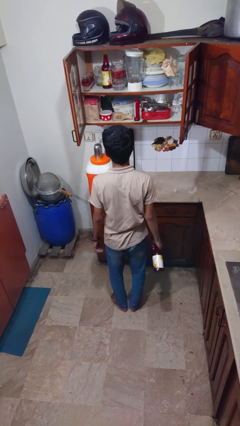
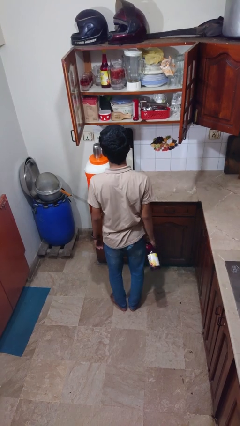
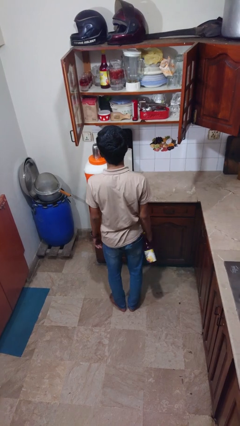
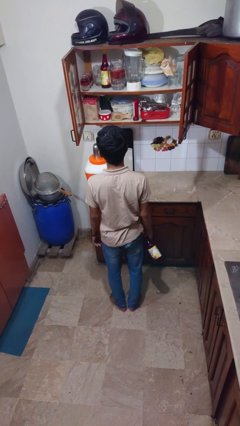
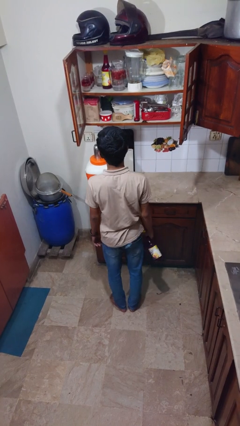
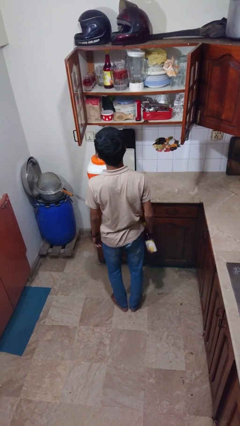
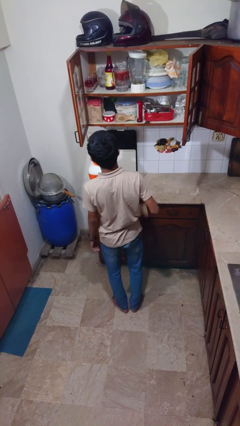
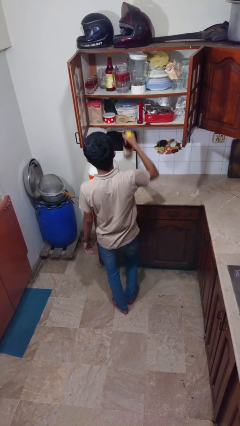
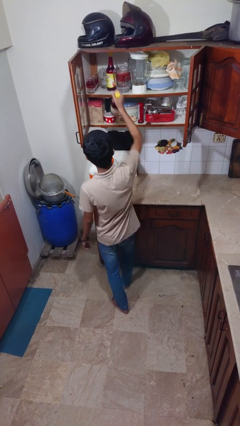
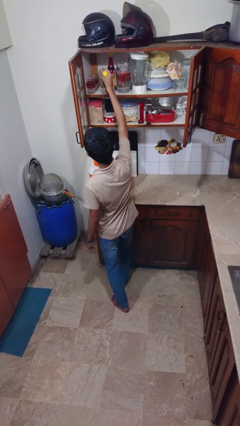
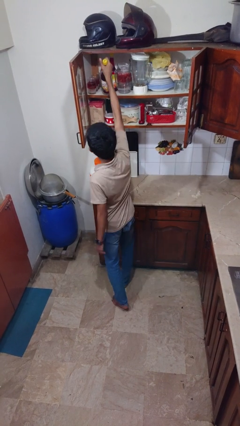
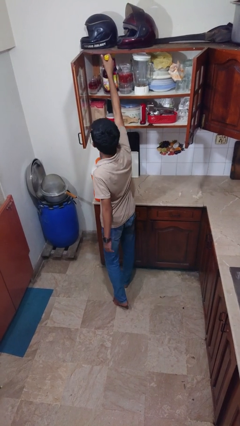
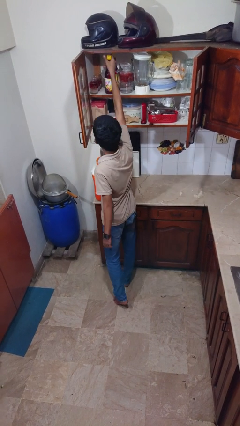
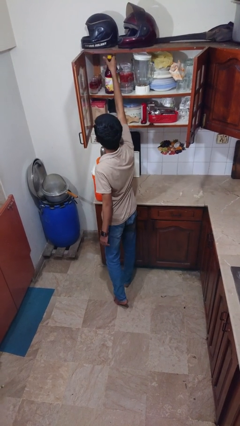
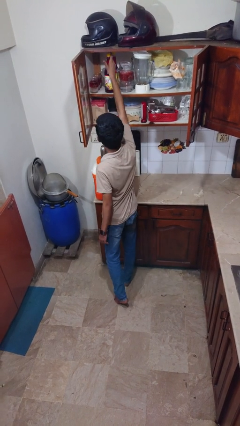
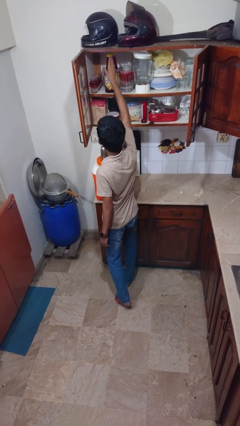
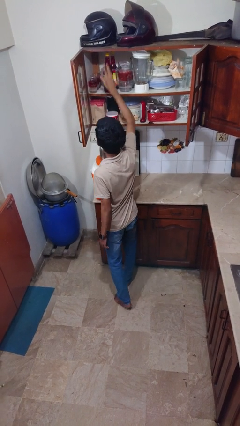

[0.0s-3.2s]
person puts down object into cabinet

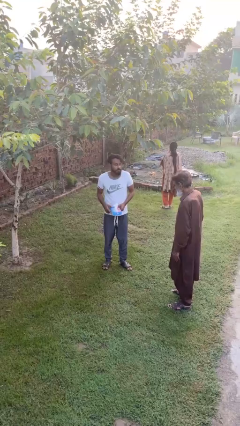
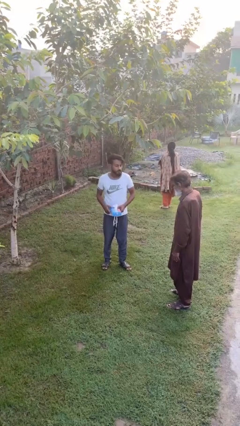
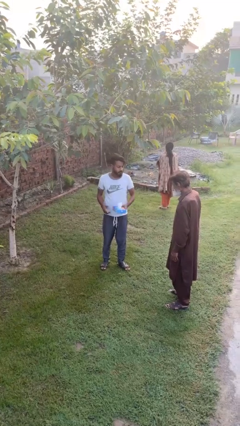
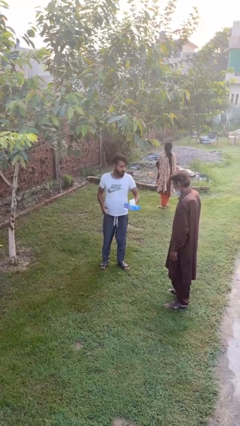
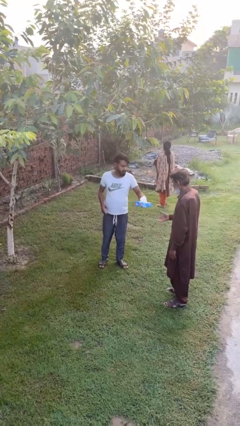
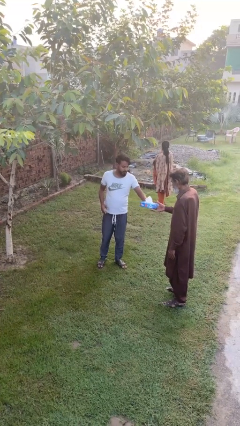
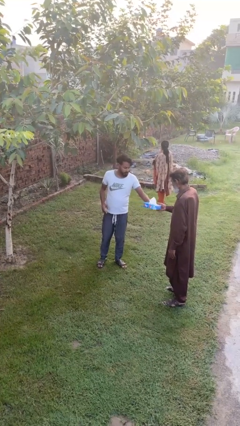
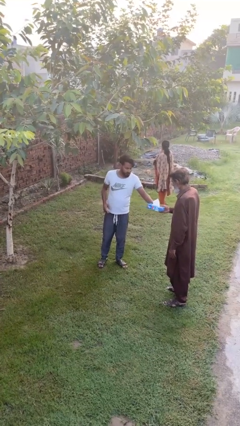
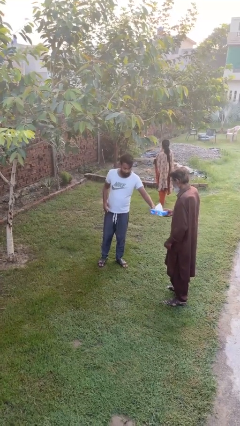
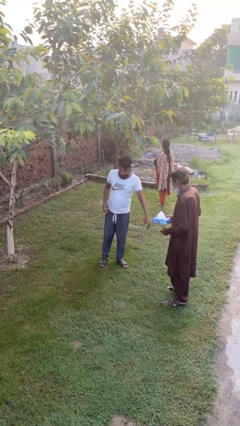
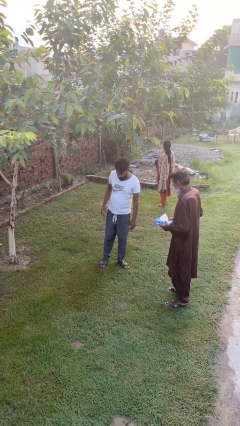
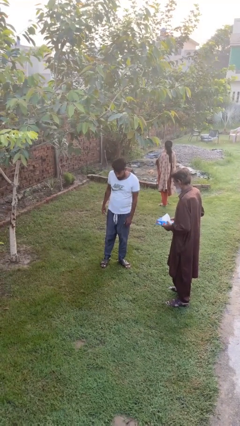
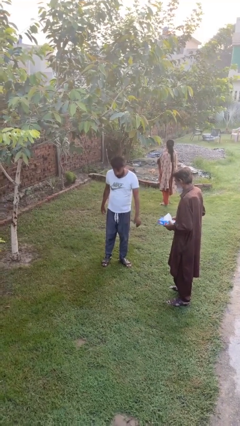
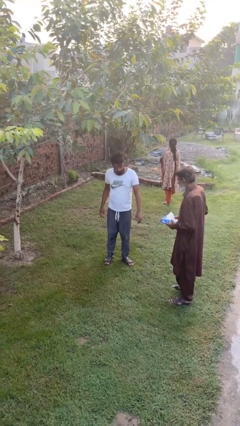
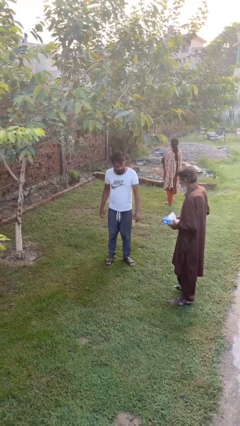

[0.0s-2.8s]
person transfers object to person

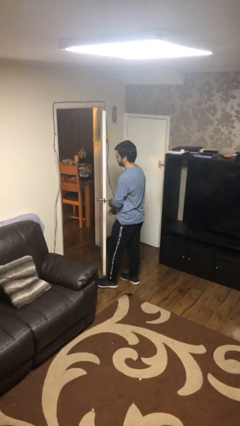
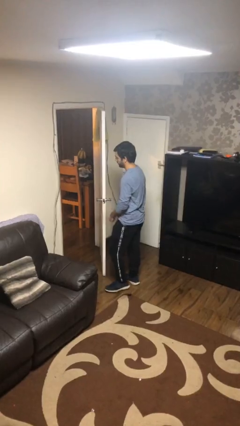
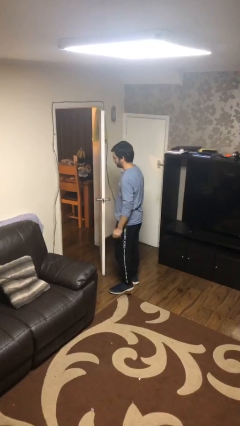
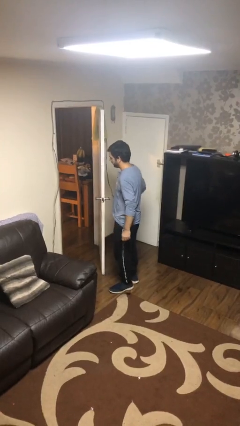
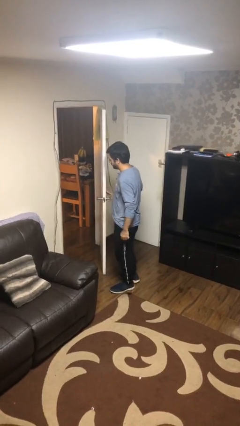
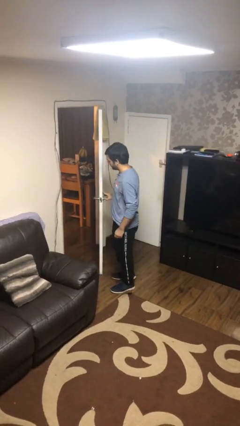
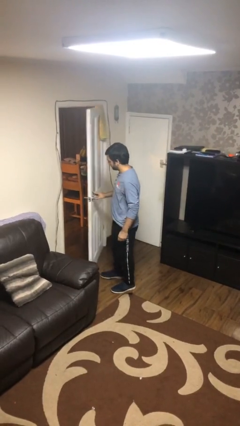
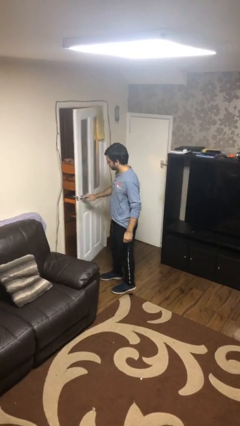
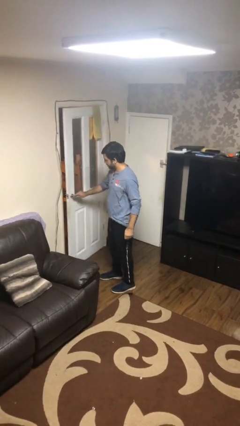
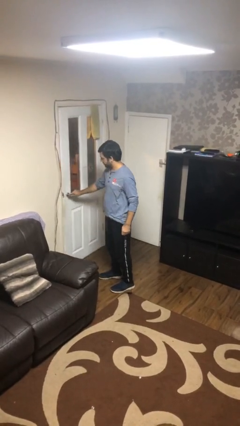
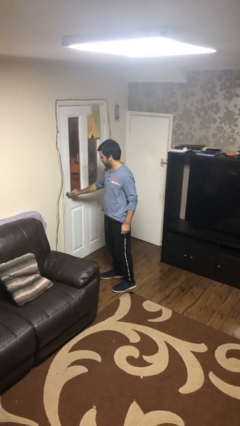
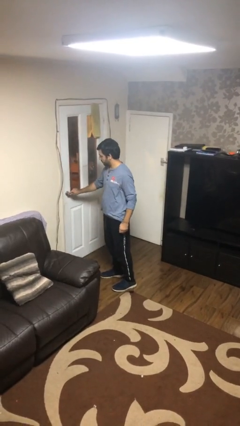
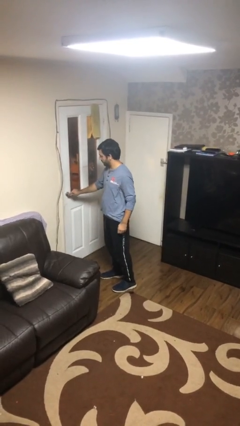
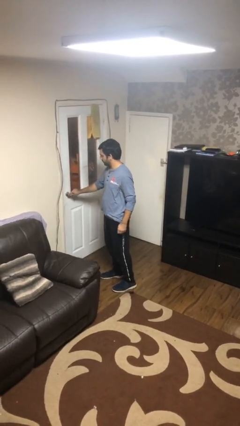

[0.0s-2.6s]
person closes facility door

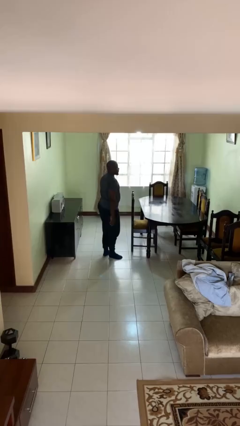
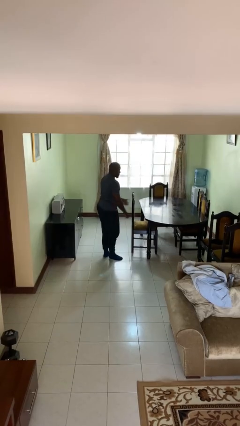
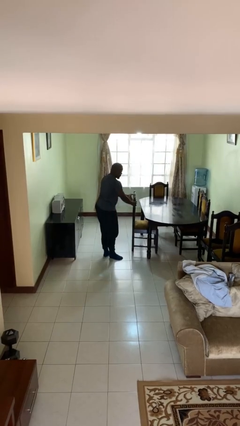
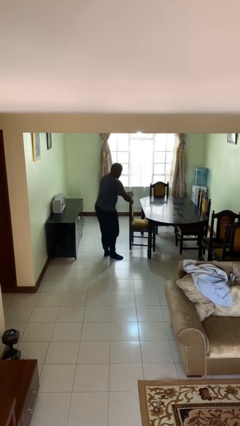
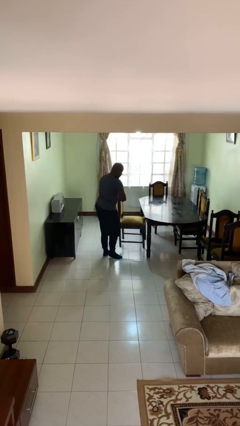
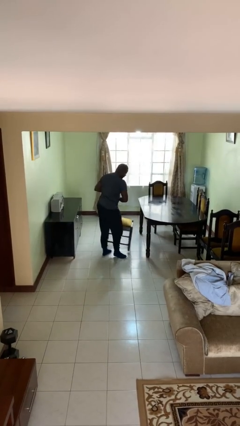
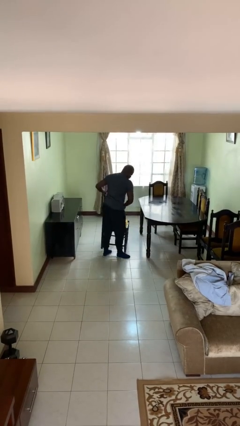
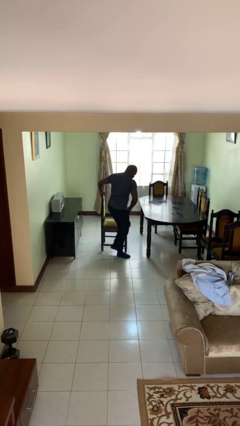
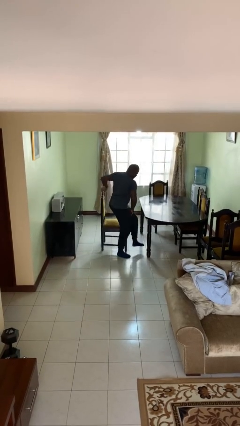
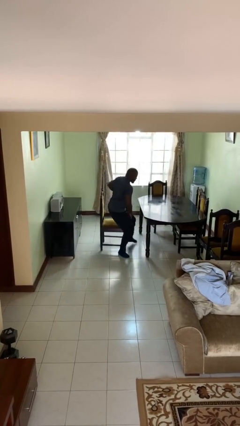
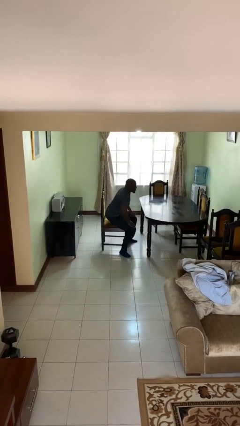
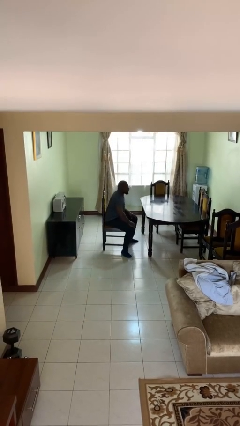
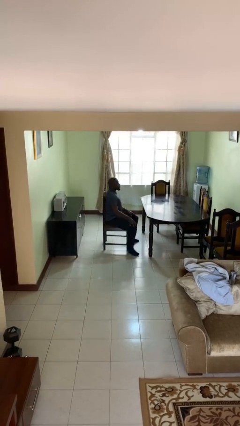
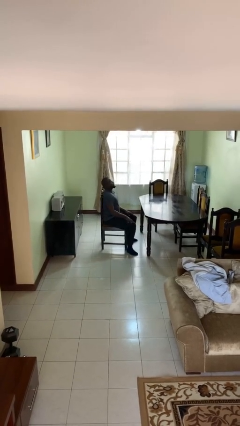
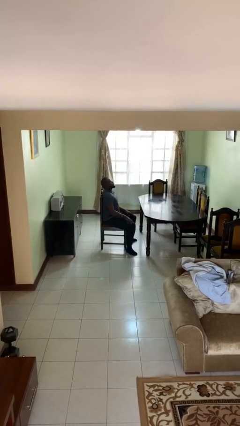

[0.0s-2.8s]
person sits down

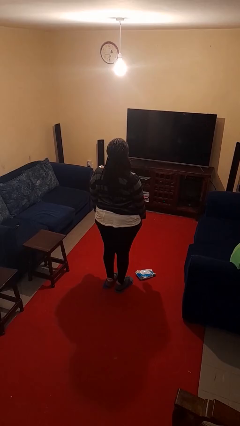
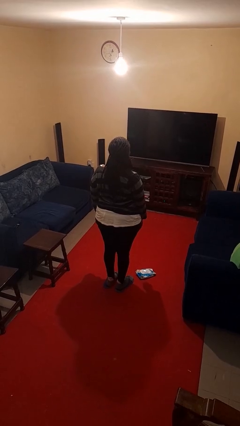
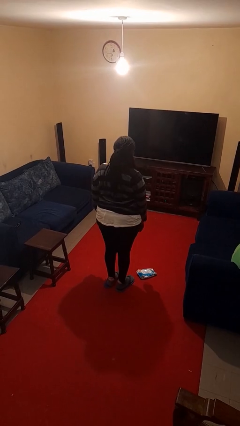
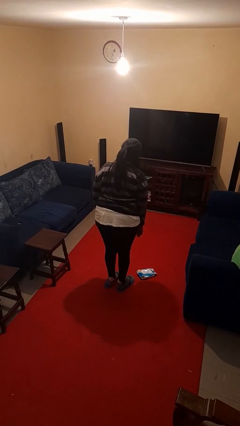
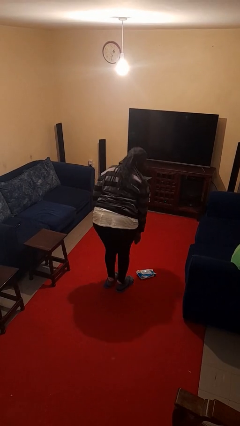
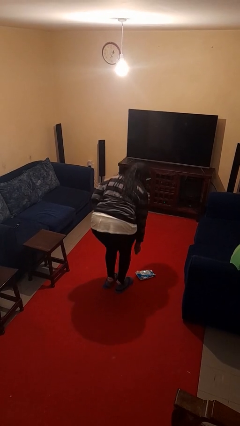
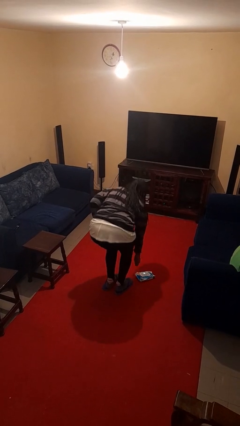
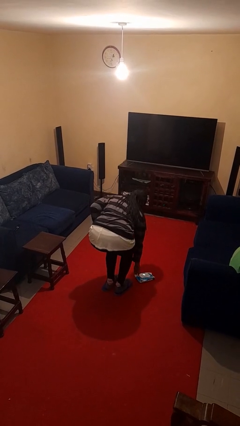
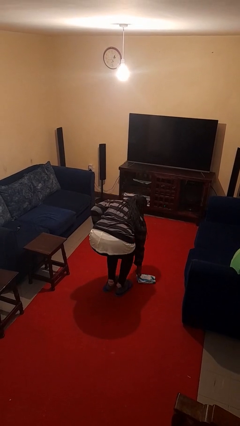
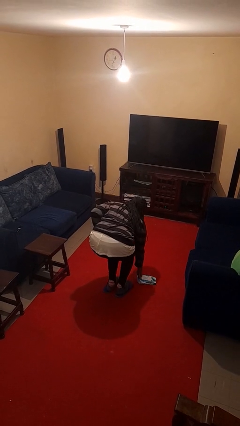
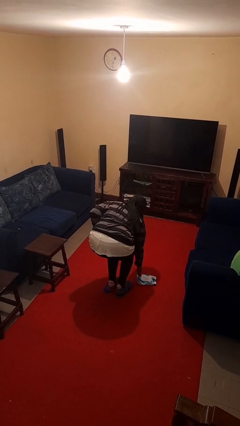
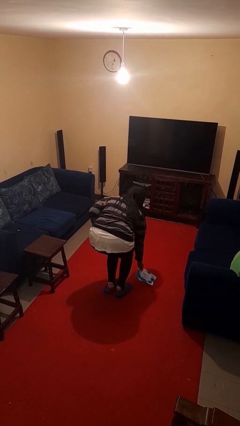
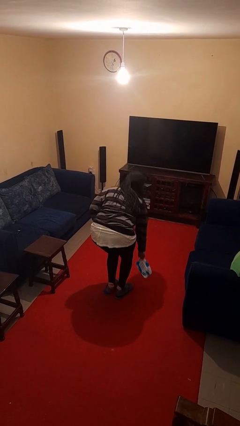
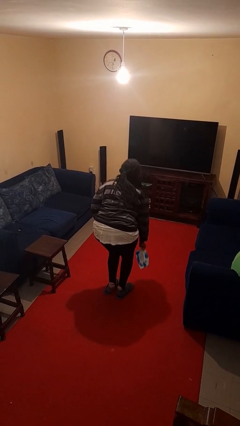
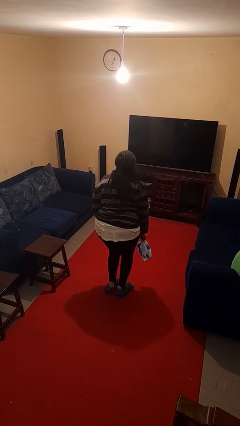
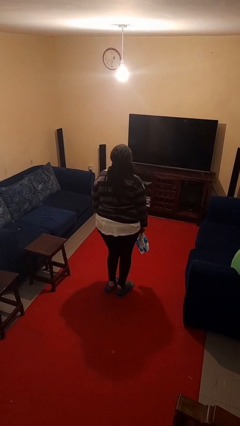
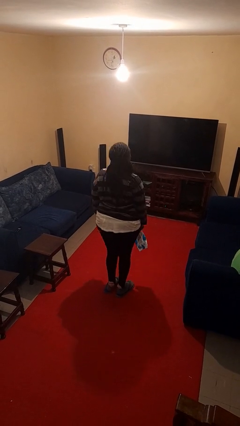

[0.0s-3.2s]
person picks up object from floor

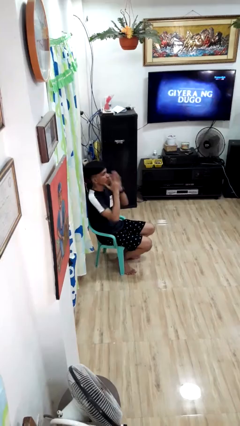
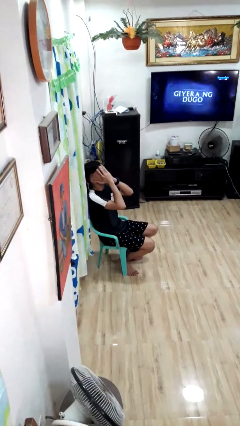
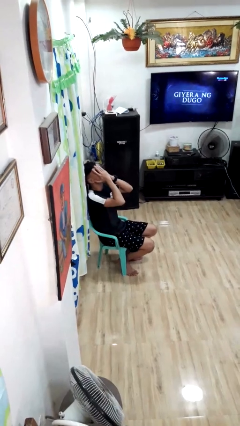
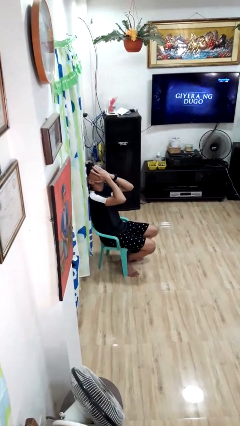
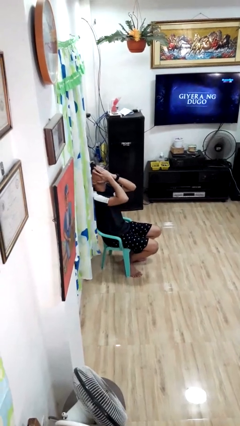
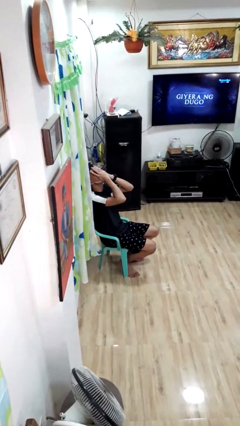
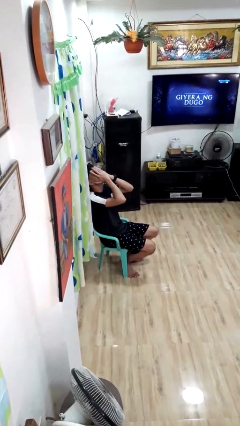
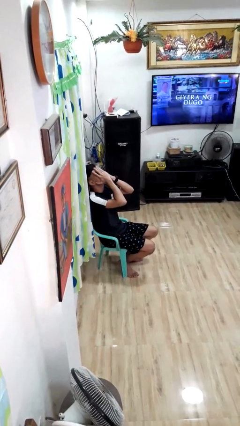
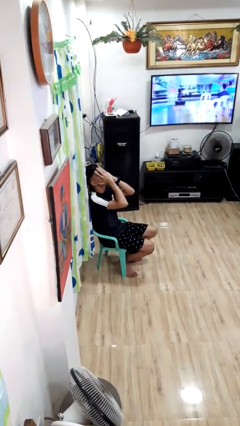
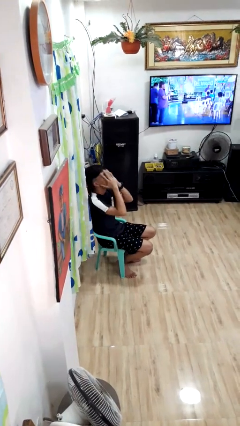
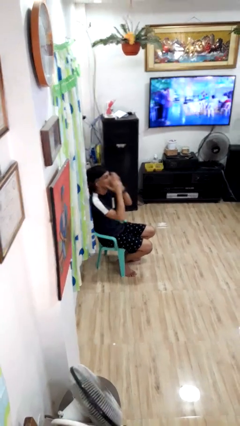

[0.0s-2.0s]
person covers face with hands

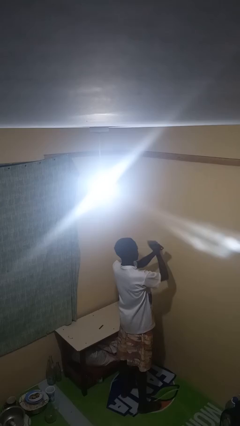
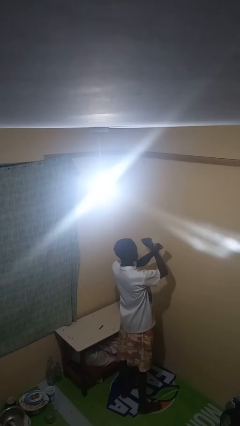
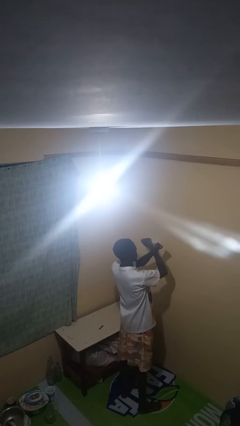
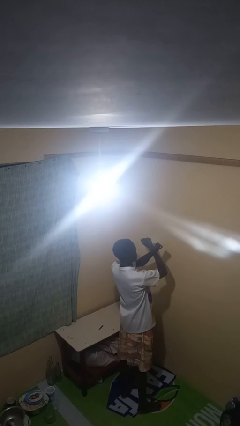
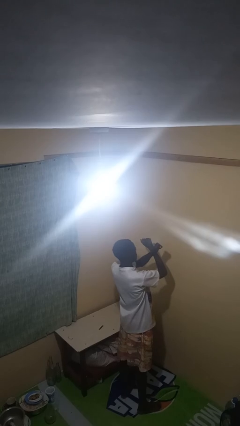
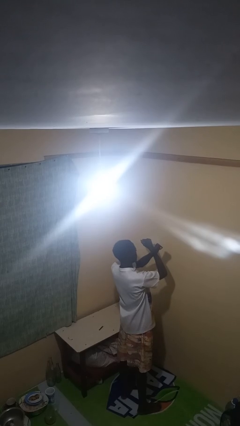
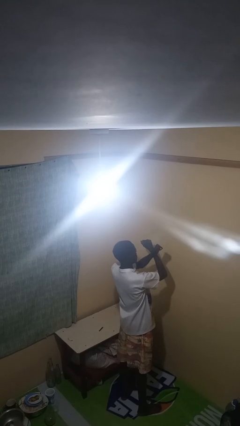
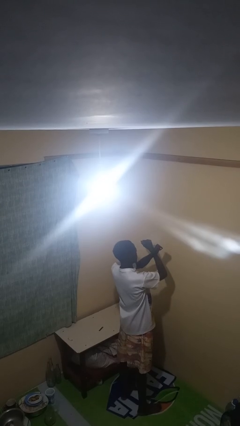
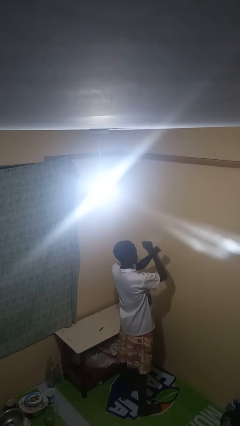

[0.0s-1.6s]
person gestures arms x
